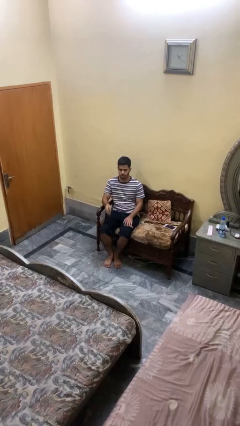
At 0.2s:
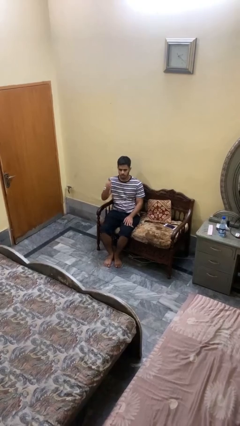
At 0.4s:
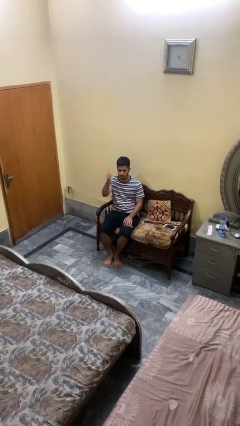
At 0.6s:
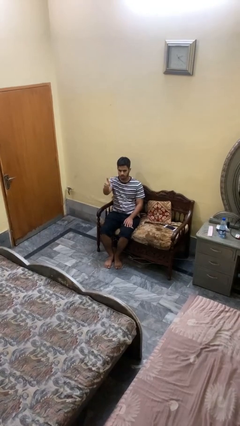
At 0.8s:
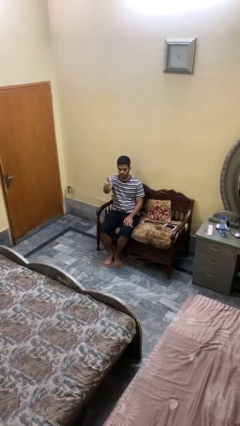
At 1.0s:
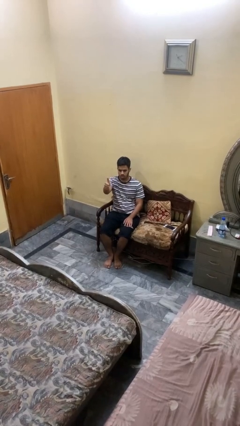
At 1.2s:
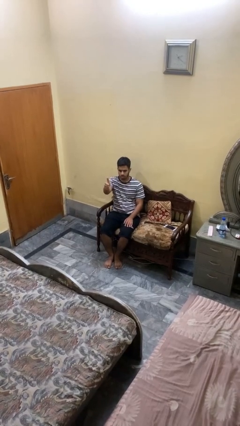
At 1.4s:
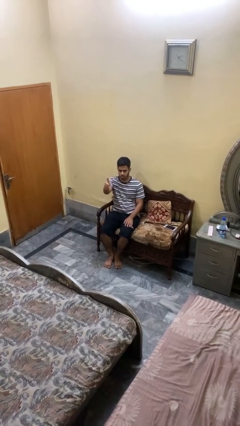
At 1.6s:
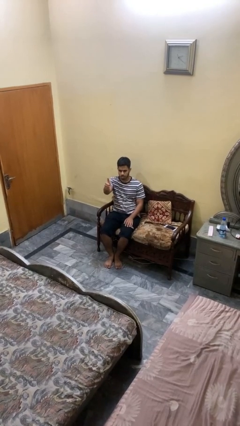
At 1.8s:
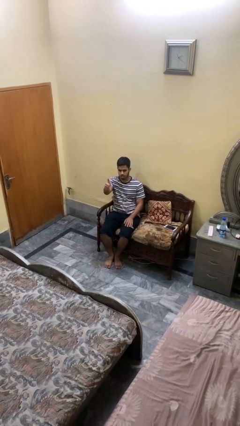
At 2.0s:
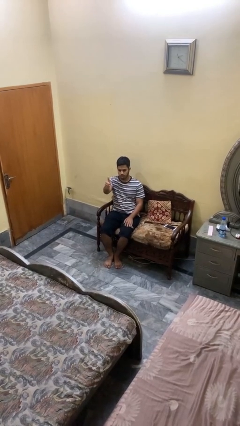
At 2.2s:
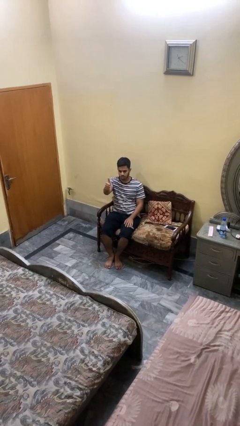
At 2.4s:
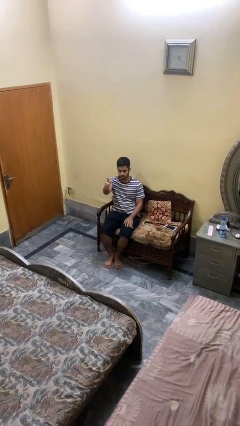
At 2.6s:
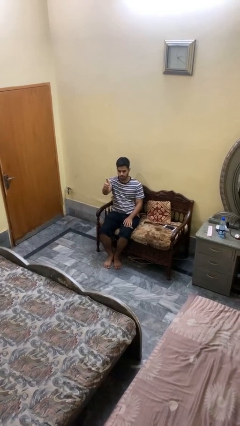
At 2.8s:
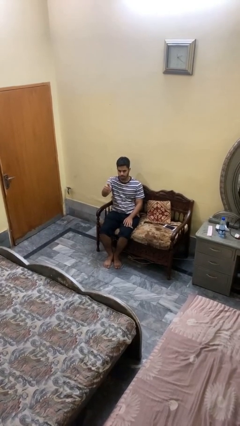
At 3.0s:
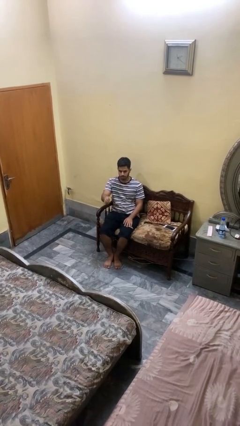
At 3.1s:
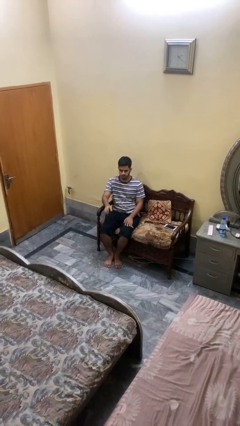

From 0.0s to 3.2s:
person gestures thumbs up

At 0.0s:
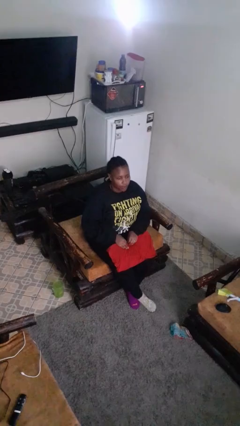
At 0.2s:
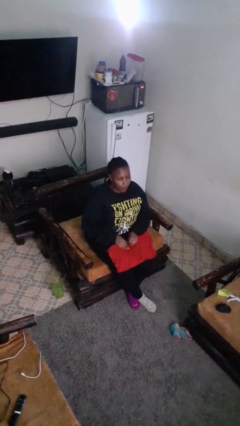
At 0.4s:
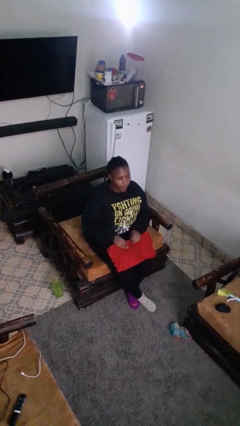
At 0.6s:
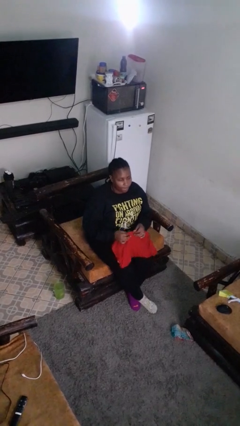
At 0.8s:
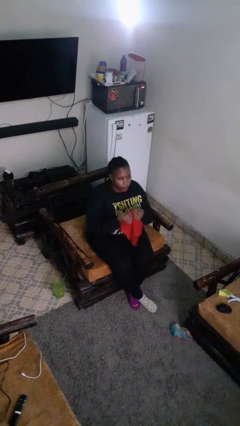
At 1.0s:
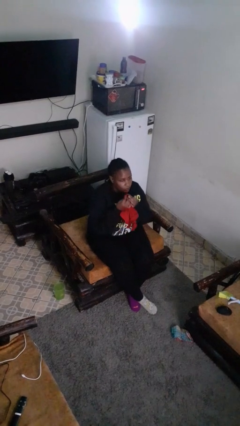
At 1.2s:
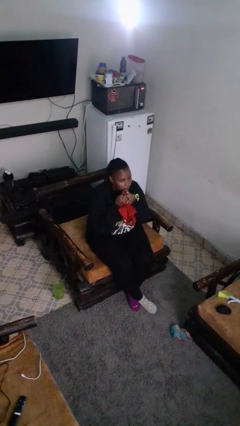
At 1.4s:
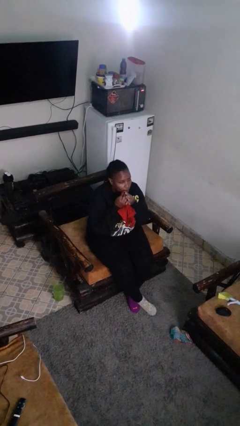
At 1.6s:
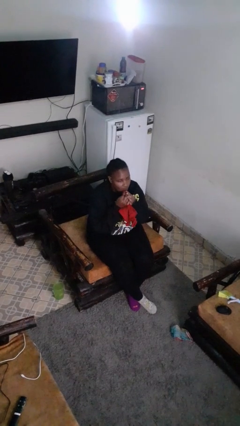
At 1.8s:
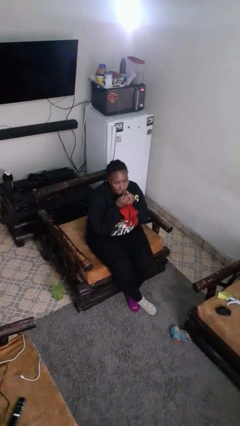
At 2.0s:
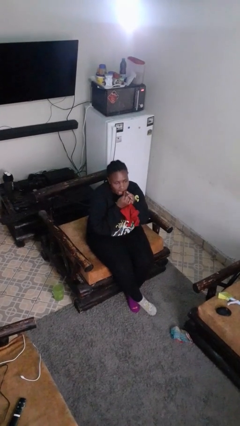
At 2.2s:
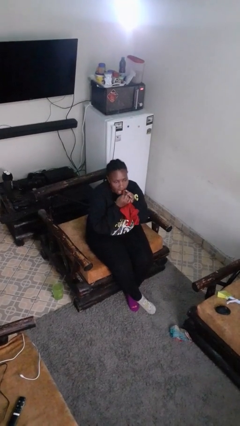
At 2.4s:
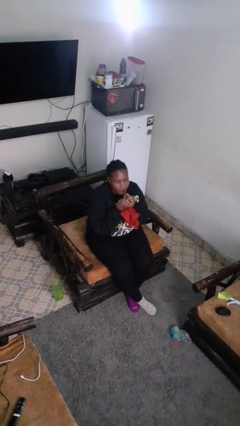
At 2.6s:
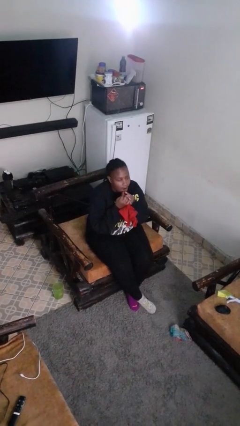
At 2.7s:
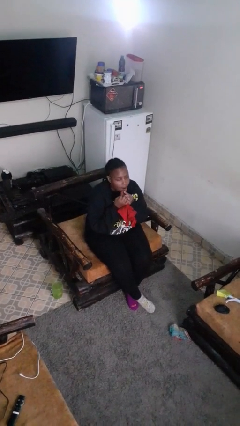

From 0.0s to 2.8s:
person wipes mouth with napkin

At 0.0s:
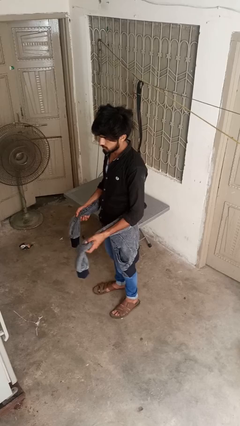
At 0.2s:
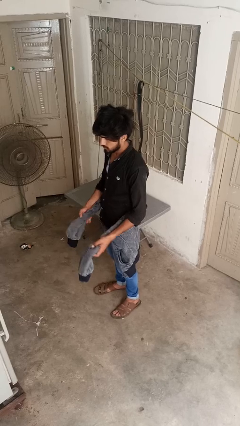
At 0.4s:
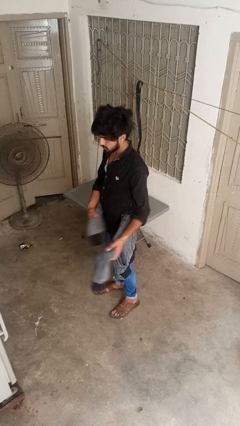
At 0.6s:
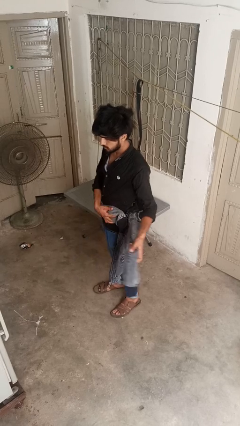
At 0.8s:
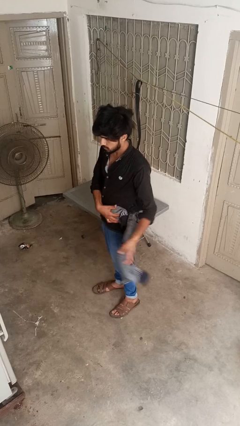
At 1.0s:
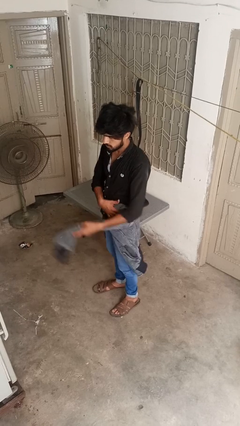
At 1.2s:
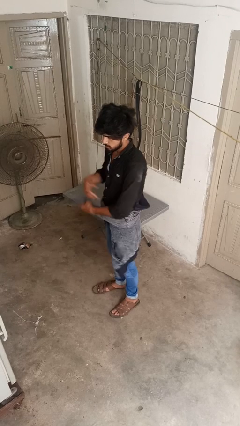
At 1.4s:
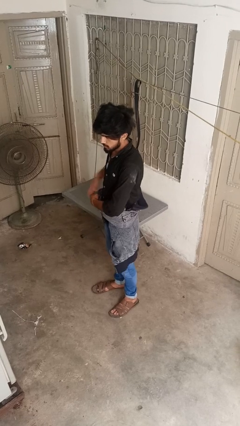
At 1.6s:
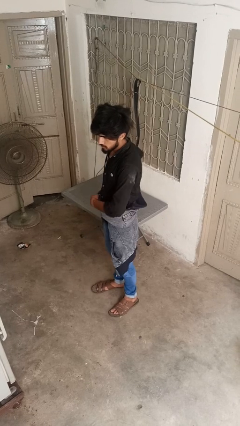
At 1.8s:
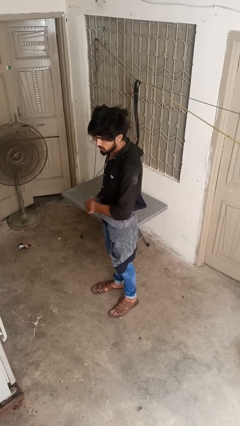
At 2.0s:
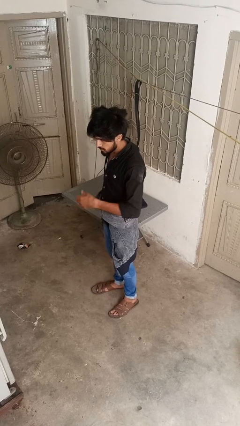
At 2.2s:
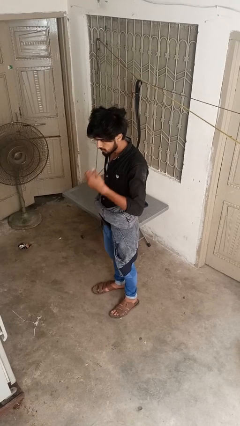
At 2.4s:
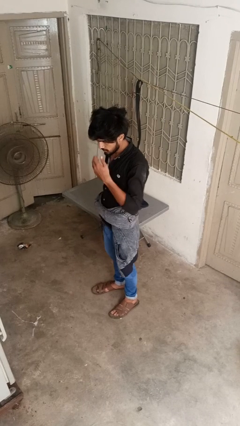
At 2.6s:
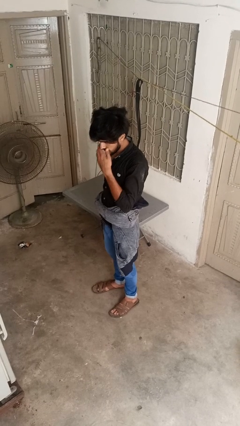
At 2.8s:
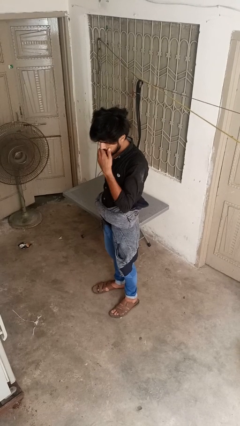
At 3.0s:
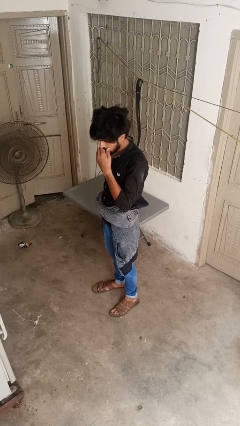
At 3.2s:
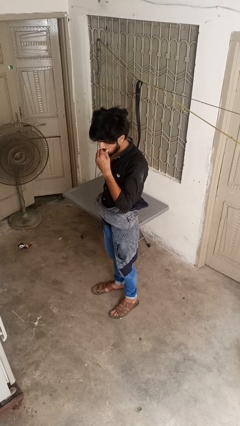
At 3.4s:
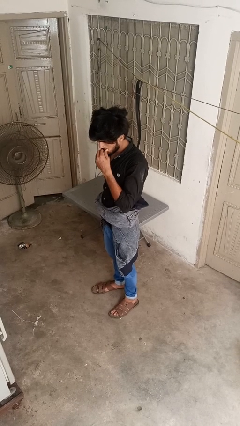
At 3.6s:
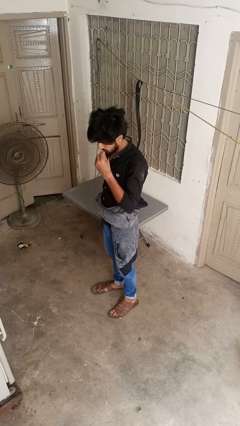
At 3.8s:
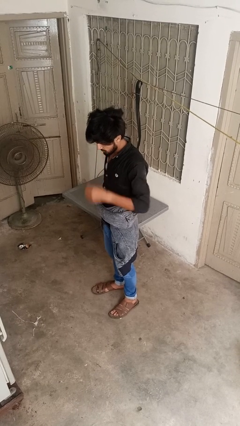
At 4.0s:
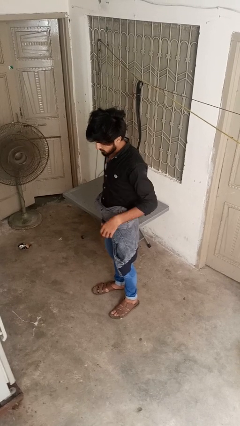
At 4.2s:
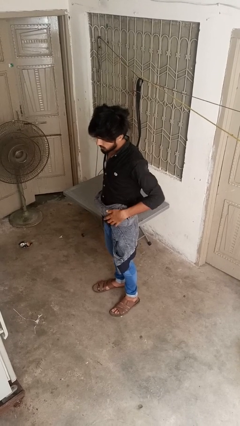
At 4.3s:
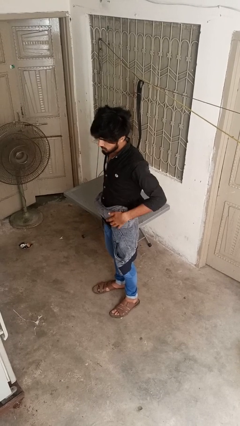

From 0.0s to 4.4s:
person ties jacket around waist

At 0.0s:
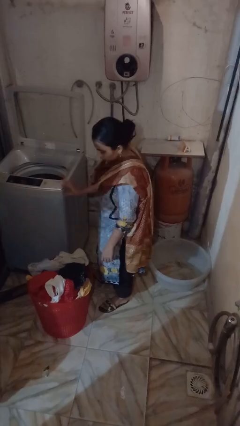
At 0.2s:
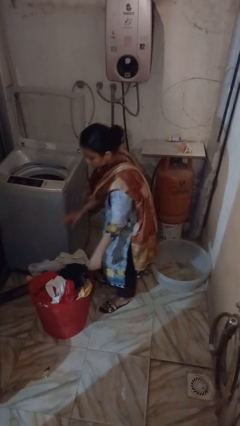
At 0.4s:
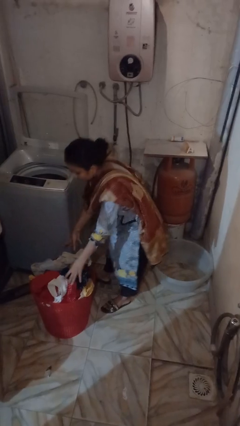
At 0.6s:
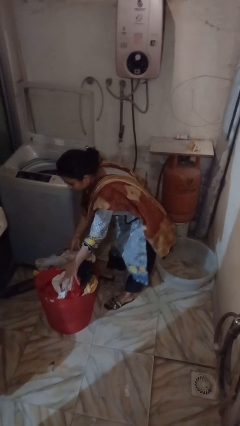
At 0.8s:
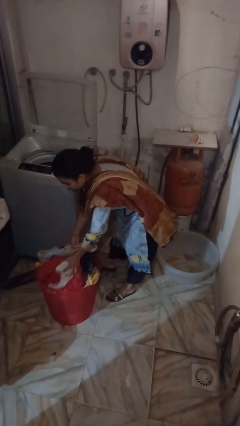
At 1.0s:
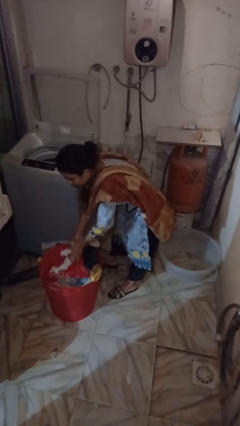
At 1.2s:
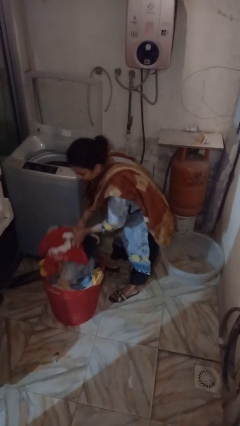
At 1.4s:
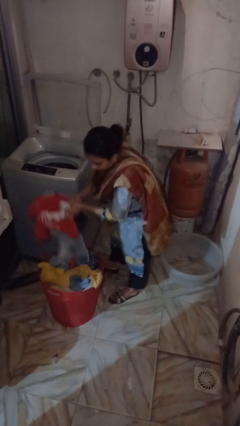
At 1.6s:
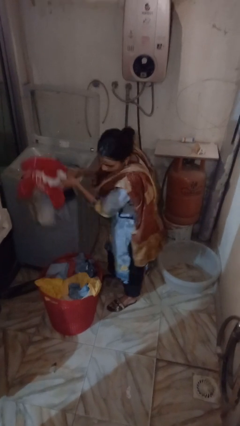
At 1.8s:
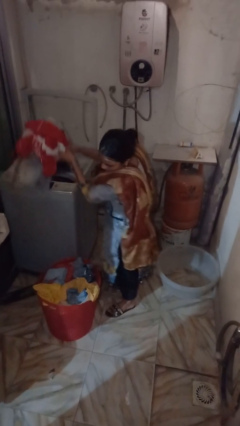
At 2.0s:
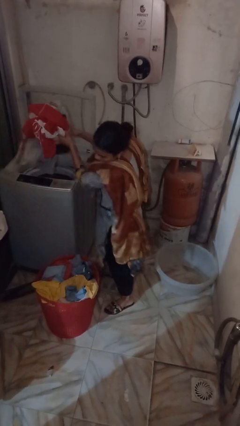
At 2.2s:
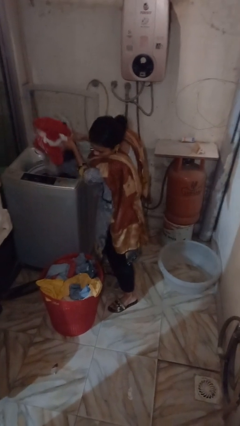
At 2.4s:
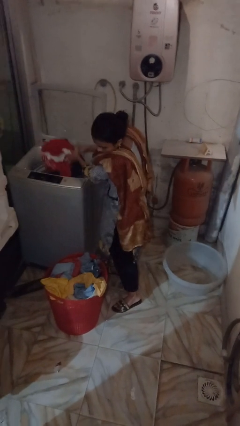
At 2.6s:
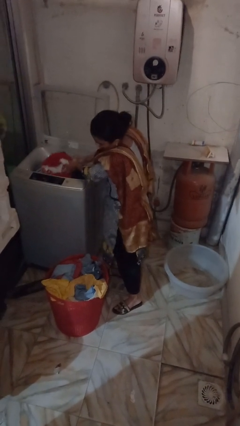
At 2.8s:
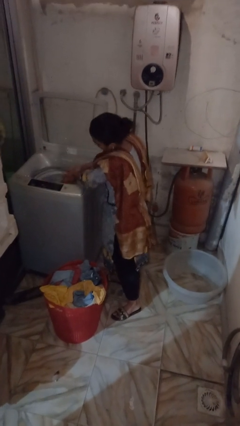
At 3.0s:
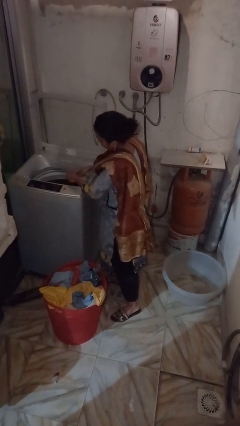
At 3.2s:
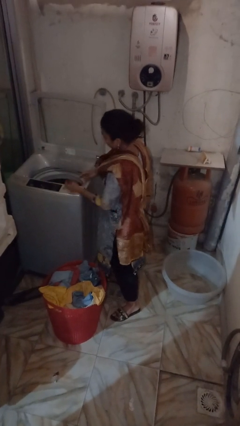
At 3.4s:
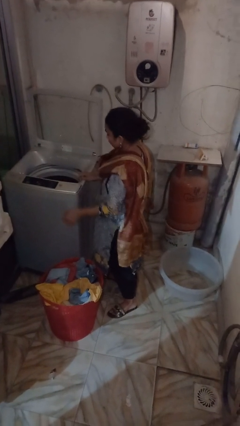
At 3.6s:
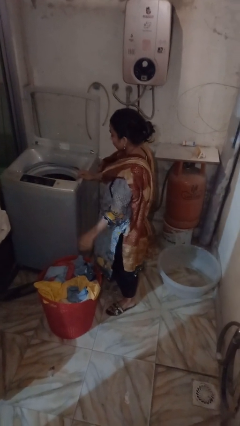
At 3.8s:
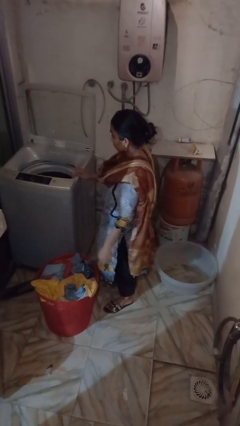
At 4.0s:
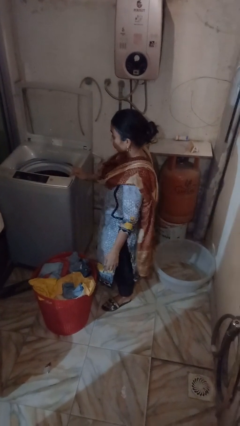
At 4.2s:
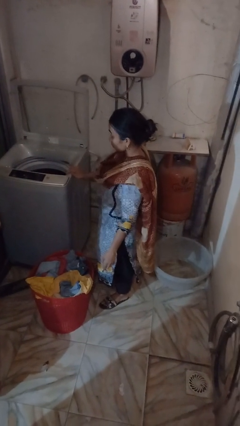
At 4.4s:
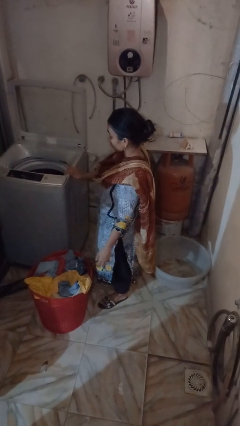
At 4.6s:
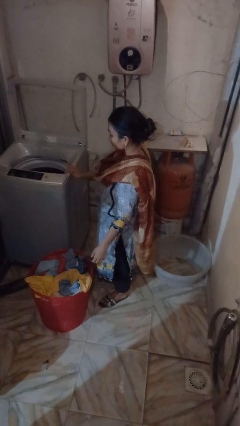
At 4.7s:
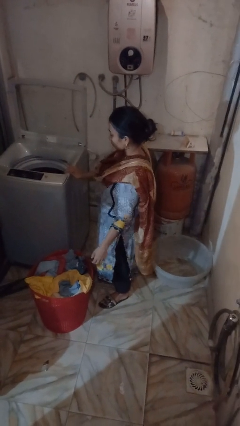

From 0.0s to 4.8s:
person loads dryer

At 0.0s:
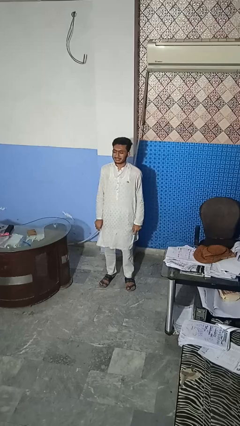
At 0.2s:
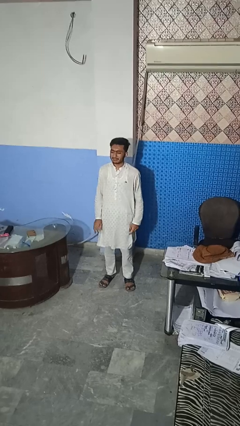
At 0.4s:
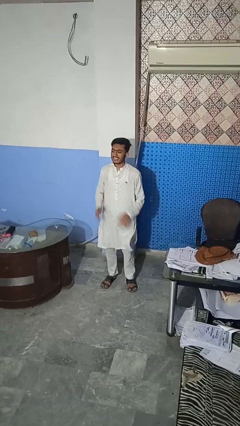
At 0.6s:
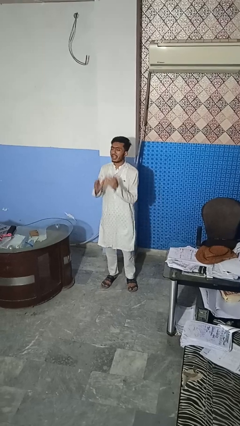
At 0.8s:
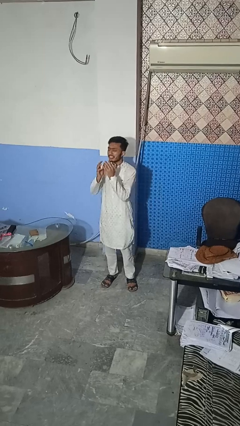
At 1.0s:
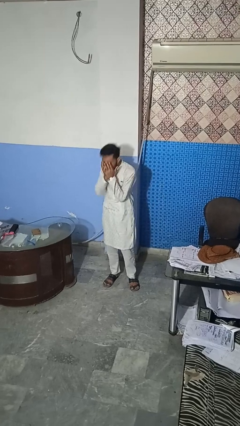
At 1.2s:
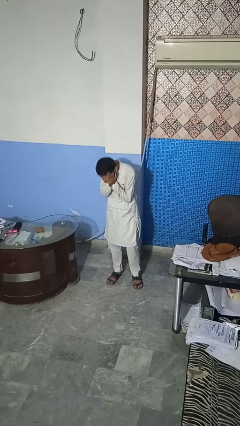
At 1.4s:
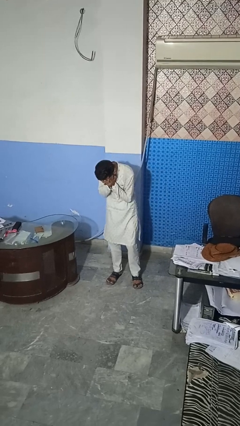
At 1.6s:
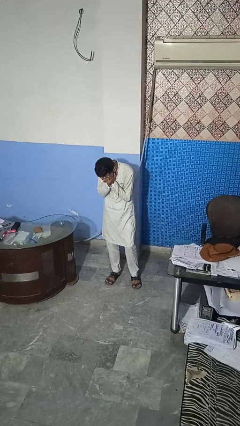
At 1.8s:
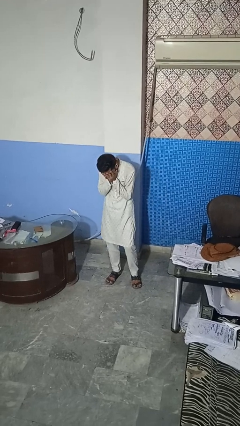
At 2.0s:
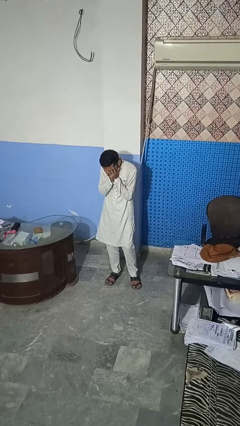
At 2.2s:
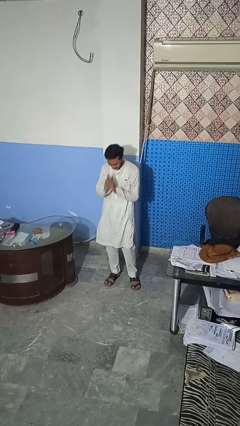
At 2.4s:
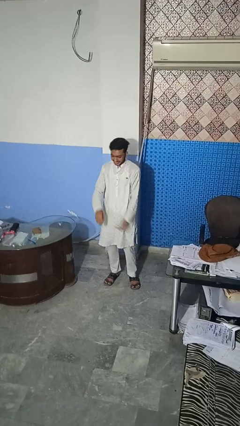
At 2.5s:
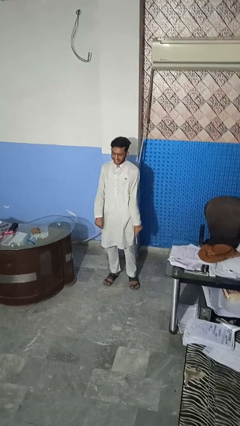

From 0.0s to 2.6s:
person sneezes into hand
